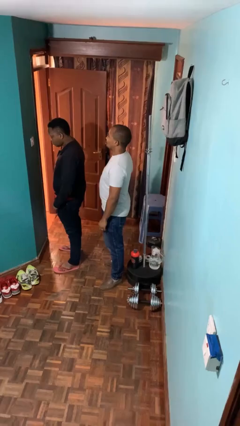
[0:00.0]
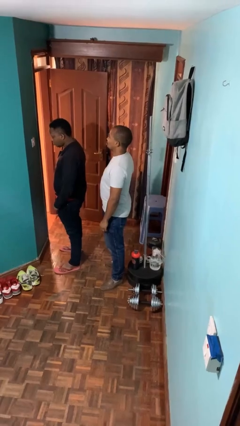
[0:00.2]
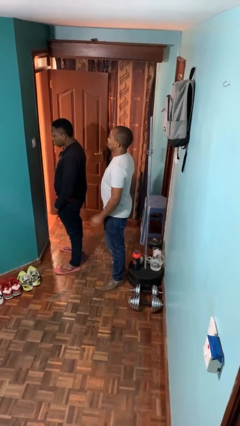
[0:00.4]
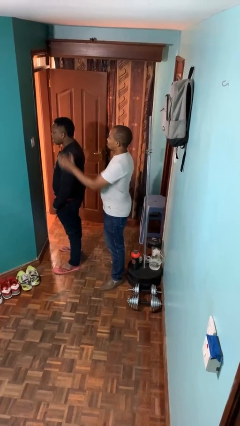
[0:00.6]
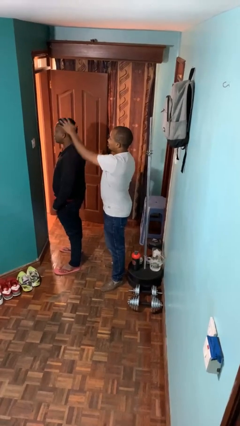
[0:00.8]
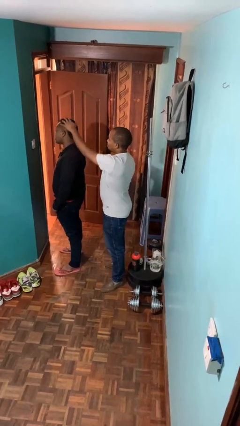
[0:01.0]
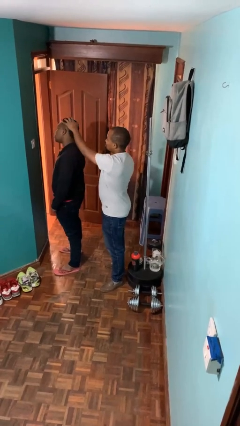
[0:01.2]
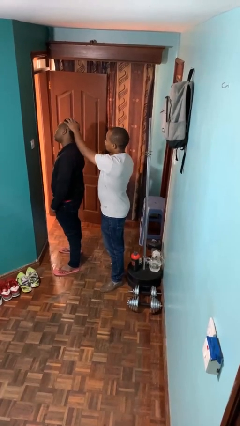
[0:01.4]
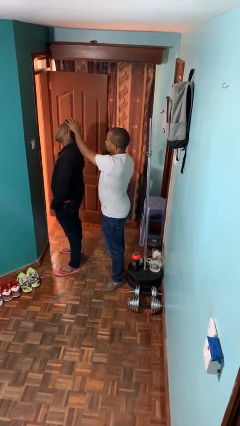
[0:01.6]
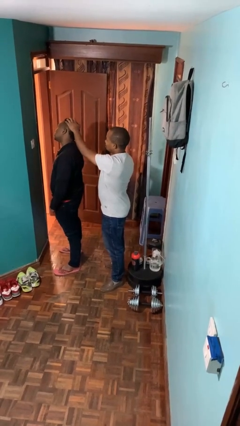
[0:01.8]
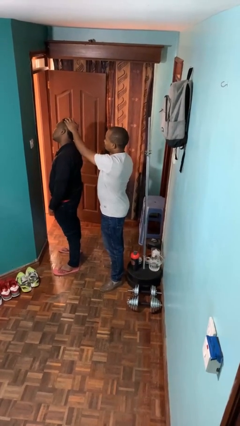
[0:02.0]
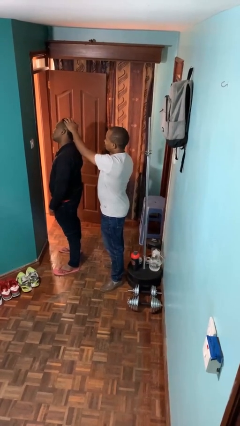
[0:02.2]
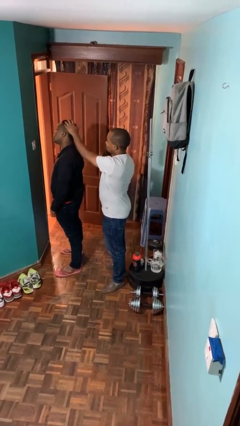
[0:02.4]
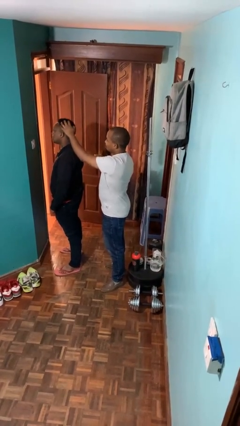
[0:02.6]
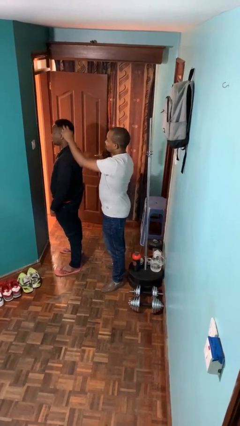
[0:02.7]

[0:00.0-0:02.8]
person grabs person by hair

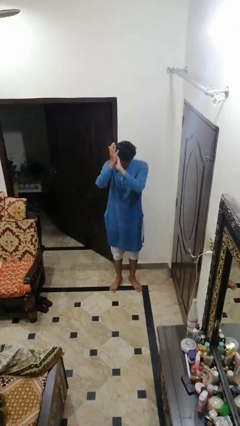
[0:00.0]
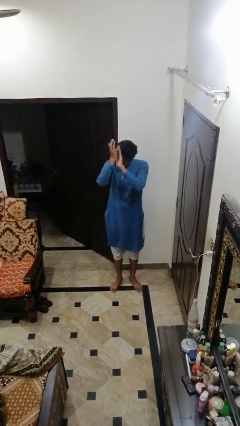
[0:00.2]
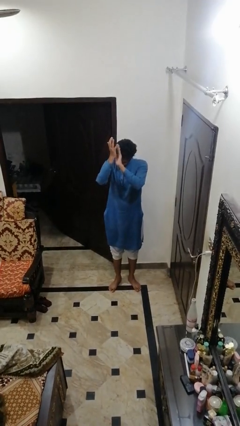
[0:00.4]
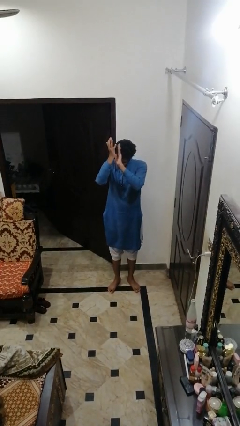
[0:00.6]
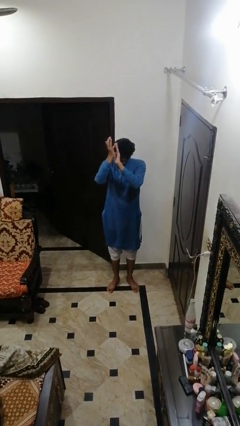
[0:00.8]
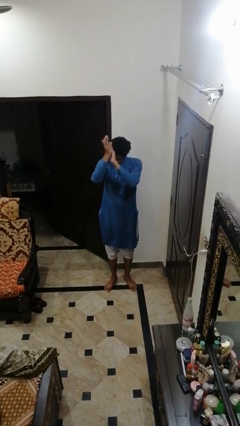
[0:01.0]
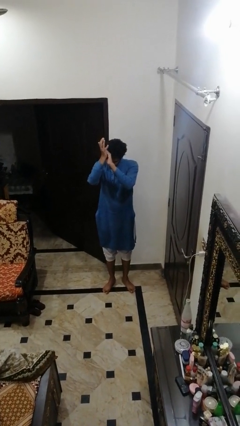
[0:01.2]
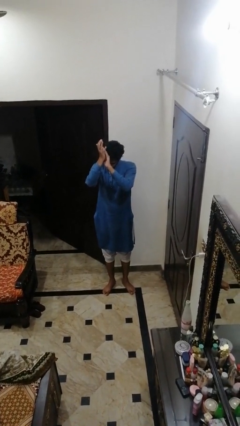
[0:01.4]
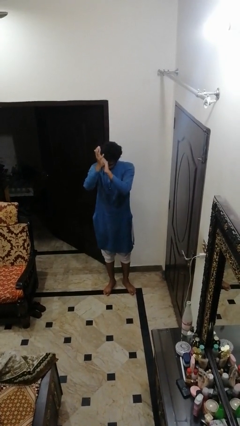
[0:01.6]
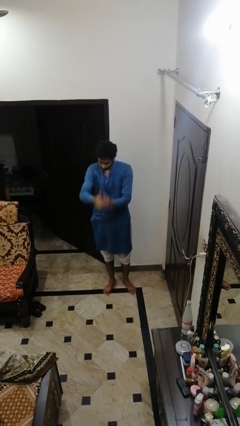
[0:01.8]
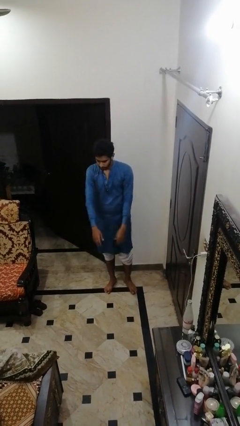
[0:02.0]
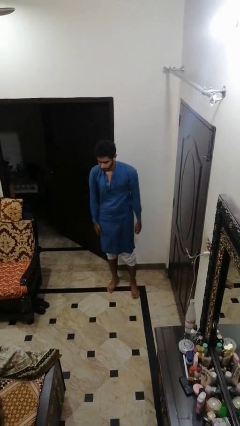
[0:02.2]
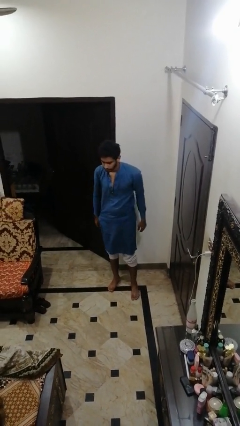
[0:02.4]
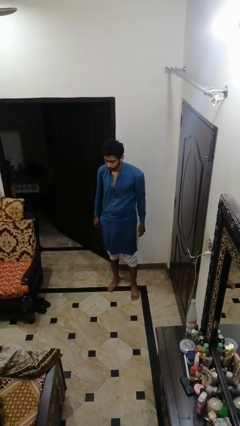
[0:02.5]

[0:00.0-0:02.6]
person claps hands

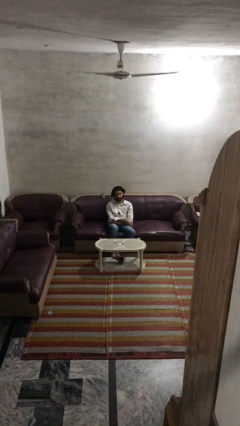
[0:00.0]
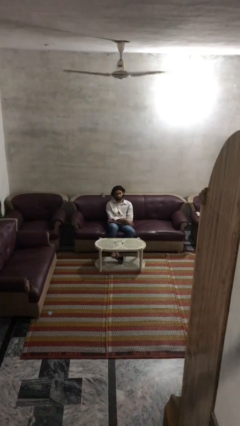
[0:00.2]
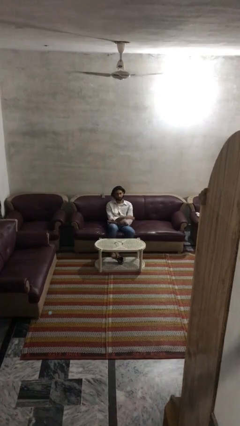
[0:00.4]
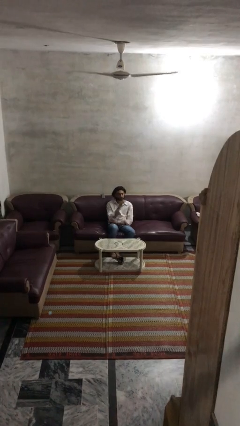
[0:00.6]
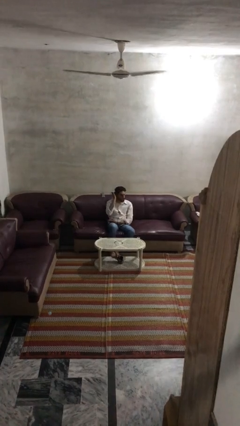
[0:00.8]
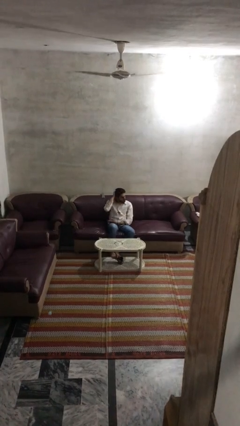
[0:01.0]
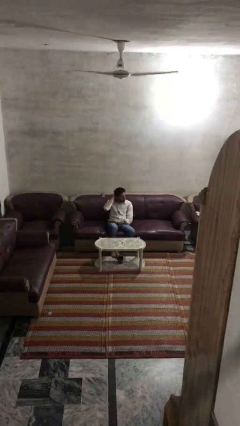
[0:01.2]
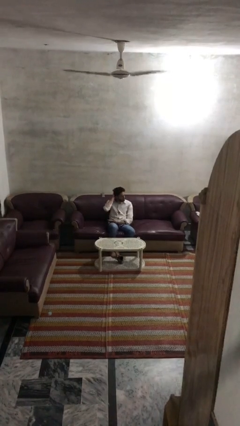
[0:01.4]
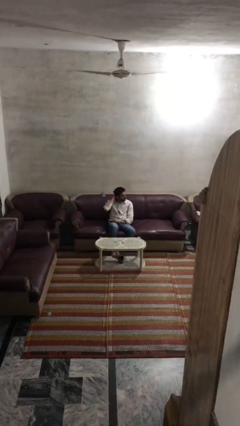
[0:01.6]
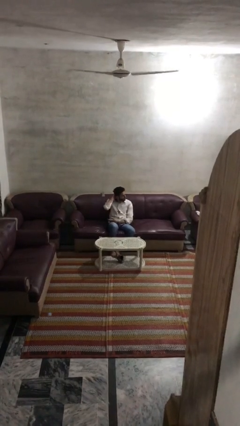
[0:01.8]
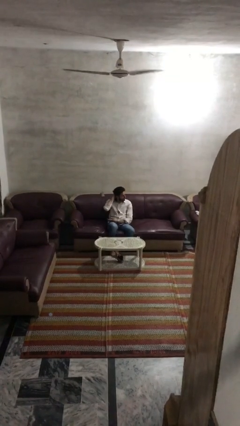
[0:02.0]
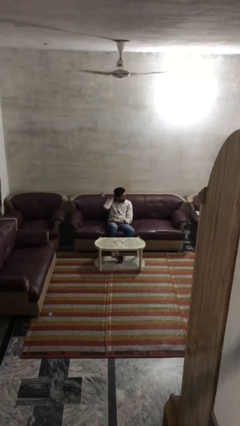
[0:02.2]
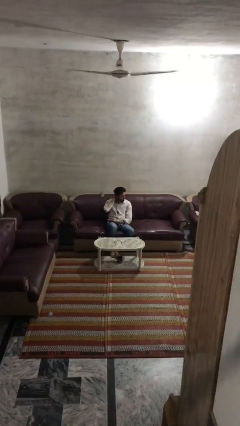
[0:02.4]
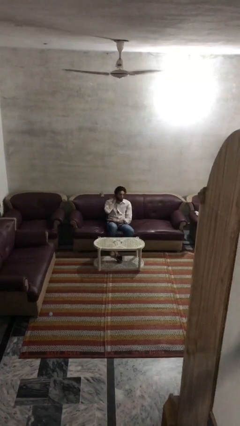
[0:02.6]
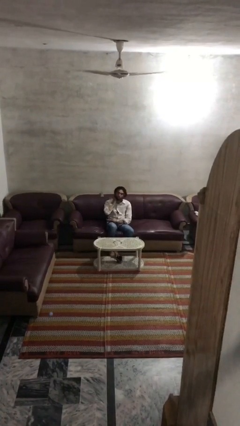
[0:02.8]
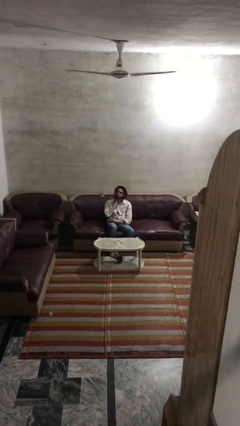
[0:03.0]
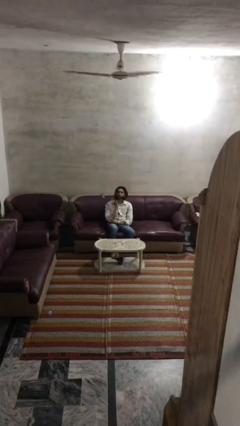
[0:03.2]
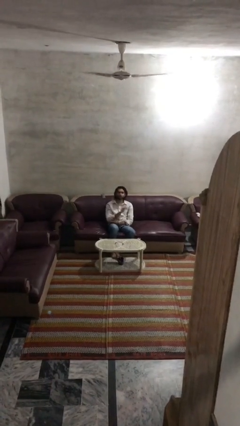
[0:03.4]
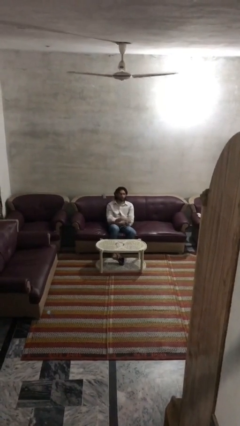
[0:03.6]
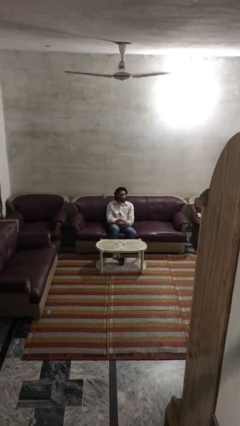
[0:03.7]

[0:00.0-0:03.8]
person strokes hair

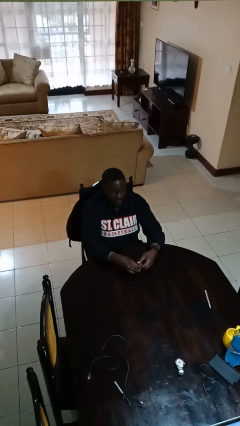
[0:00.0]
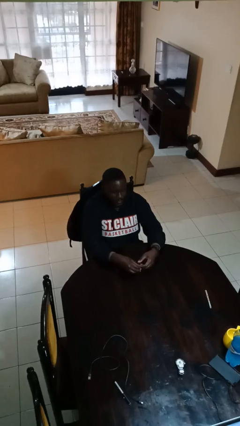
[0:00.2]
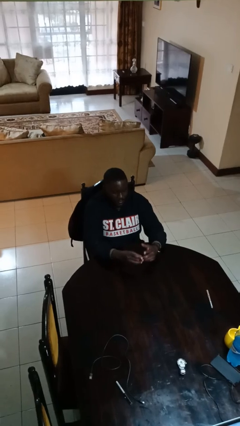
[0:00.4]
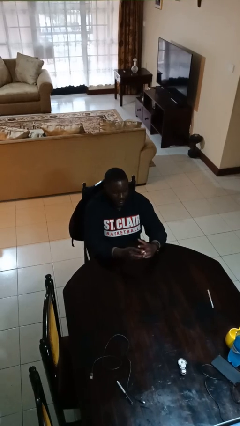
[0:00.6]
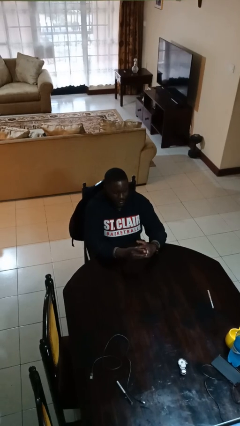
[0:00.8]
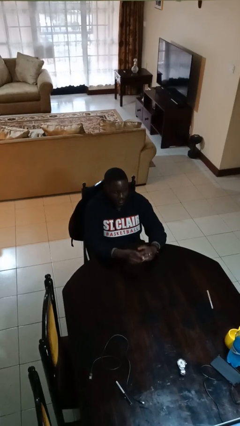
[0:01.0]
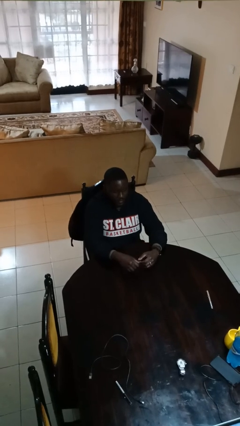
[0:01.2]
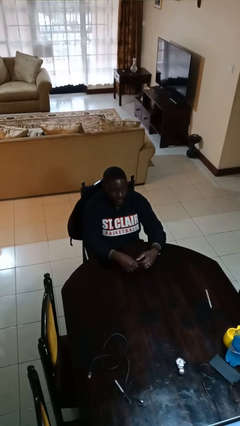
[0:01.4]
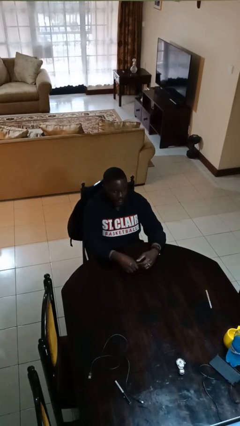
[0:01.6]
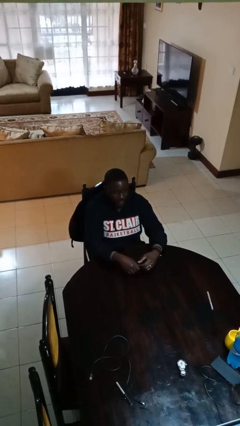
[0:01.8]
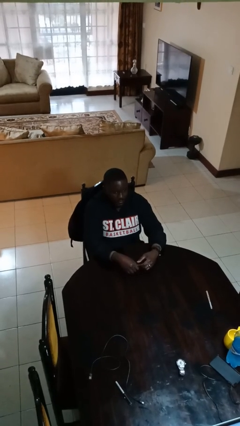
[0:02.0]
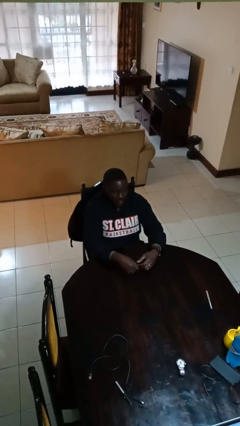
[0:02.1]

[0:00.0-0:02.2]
person puts on ring

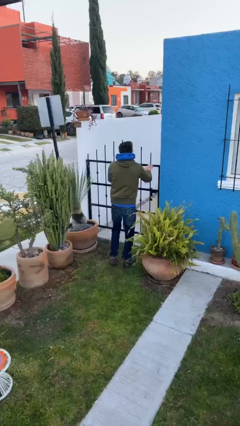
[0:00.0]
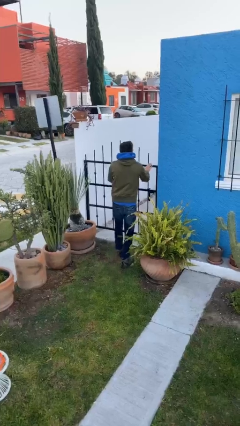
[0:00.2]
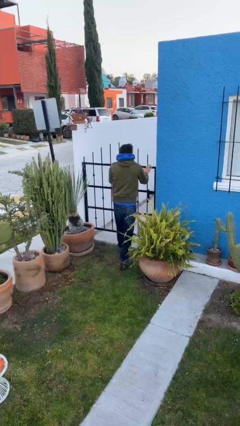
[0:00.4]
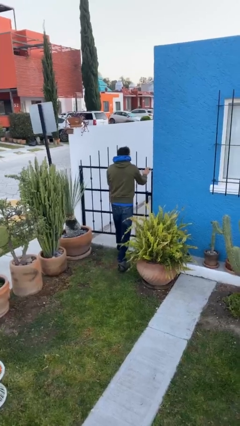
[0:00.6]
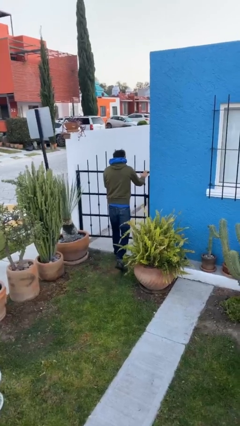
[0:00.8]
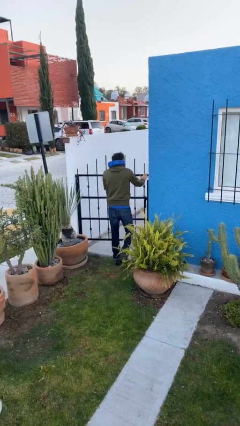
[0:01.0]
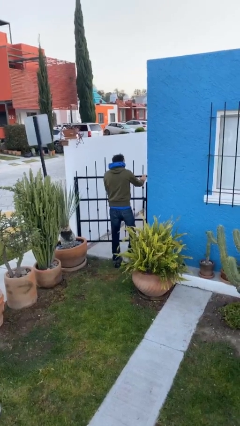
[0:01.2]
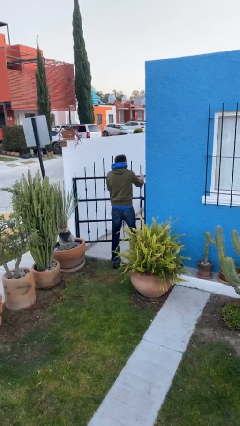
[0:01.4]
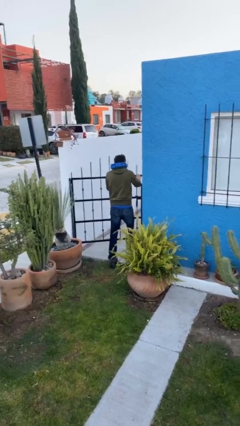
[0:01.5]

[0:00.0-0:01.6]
person opens facility door

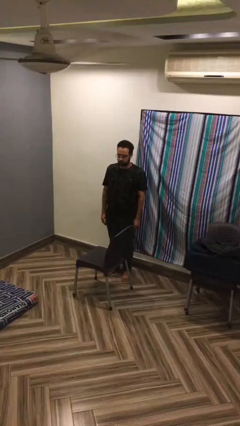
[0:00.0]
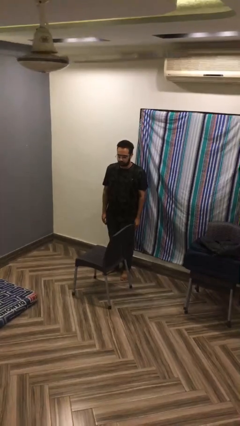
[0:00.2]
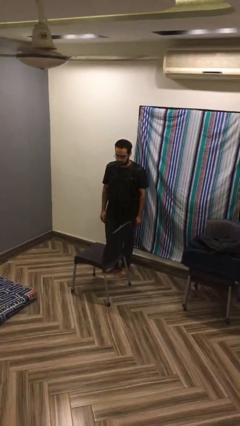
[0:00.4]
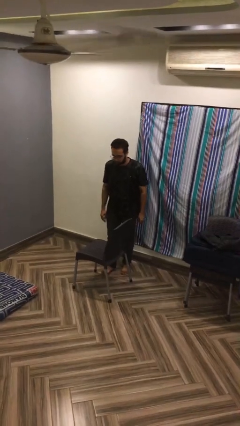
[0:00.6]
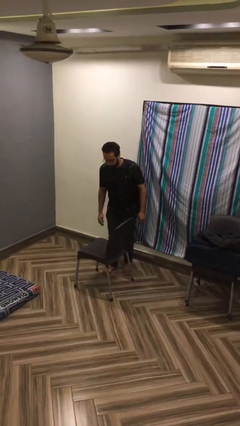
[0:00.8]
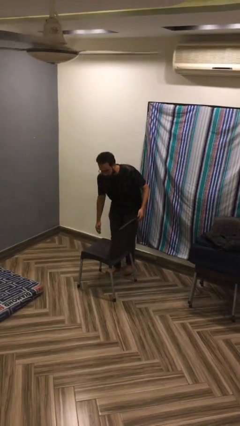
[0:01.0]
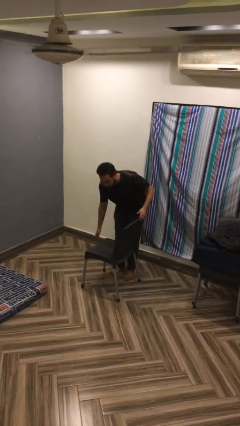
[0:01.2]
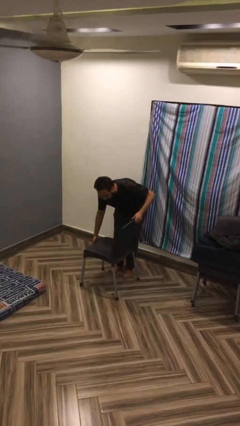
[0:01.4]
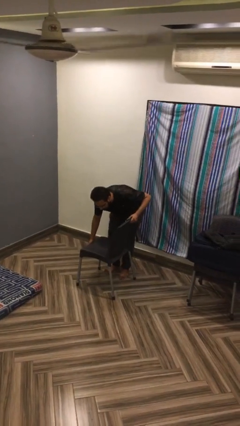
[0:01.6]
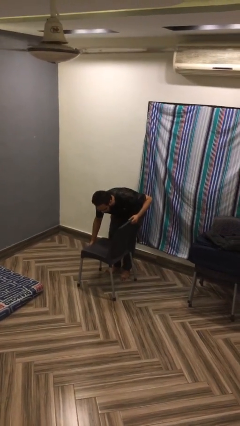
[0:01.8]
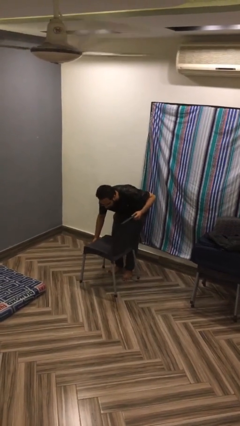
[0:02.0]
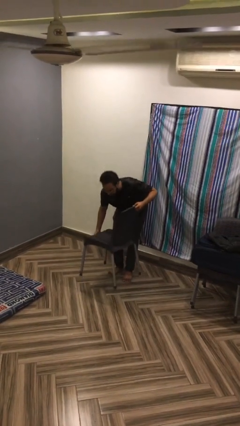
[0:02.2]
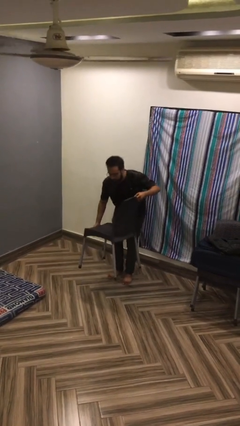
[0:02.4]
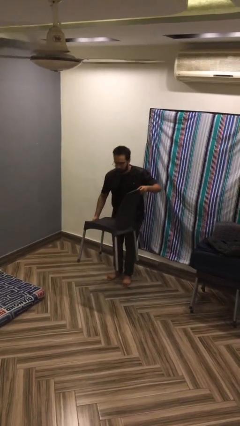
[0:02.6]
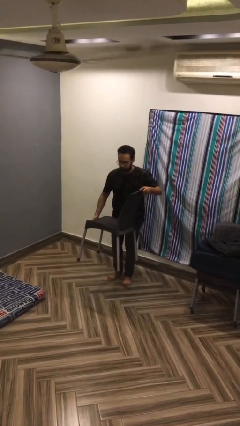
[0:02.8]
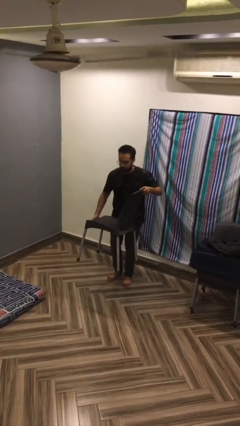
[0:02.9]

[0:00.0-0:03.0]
person picks up object from floor

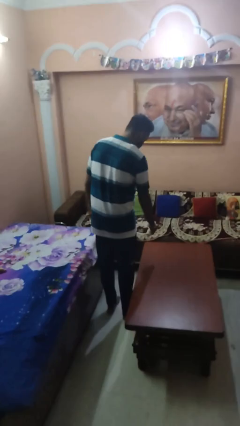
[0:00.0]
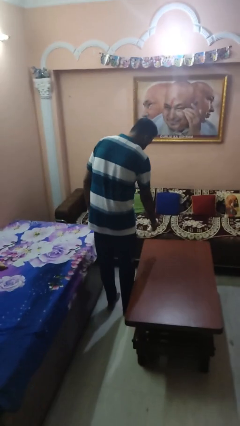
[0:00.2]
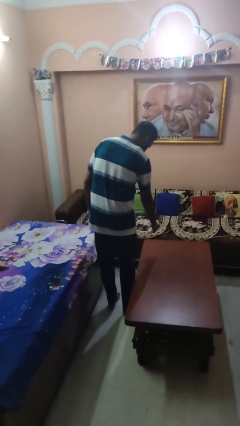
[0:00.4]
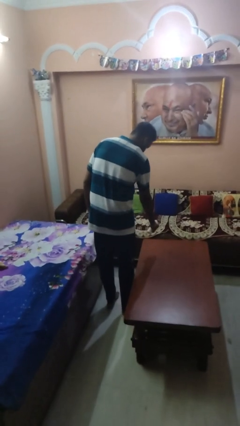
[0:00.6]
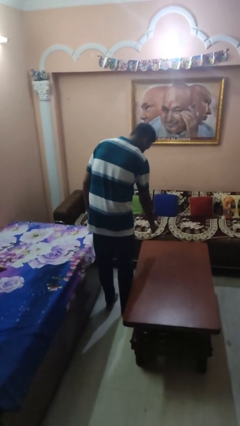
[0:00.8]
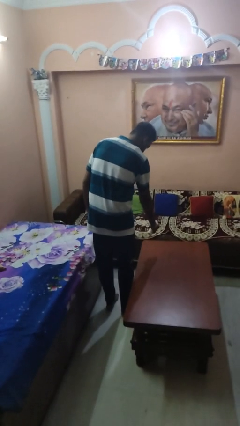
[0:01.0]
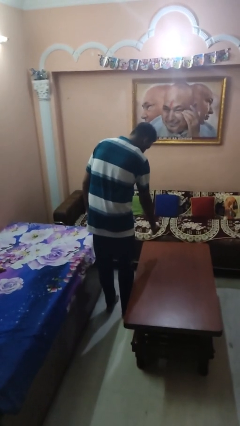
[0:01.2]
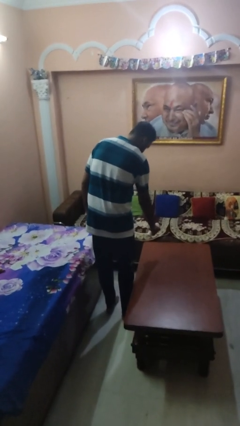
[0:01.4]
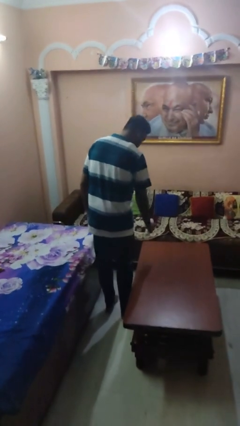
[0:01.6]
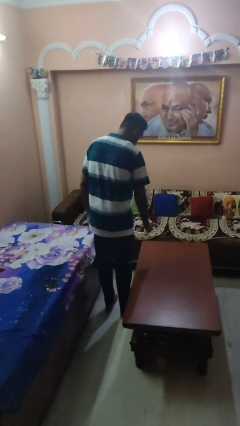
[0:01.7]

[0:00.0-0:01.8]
person sprays from bottle
